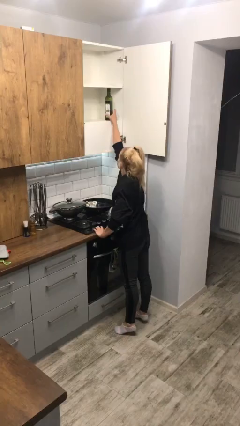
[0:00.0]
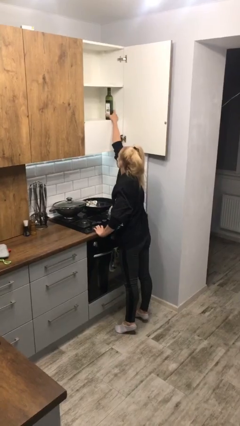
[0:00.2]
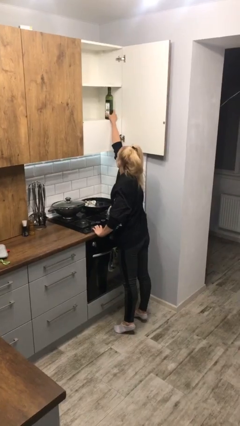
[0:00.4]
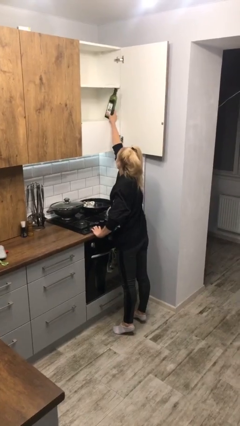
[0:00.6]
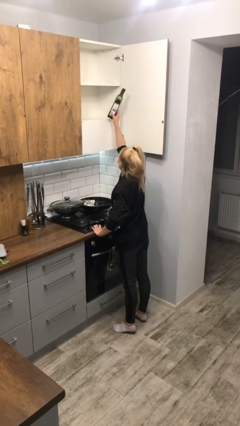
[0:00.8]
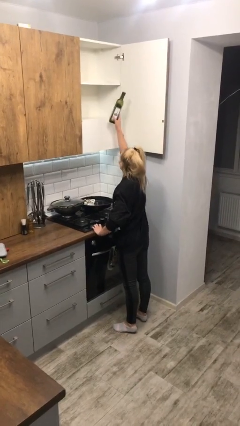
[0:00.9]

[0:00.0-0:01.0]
person picks up object from shelf

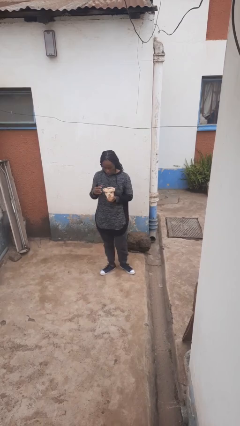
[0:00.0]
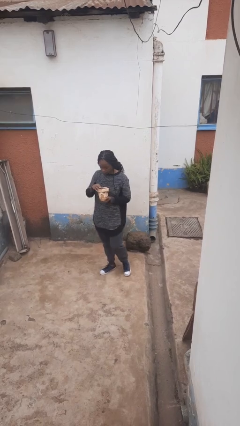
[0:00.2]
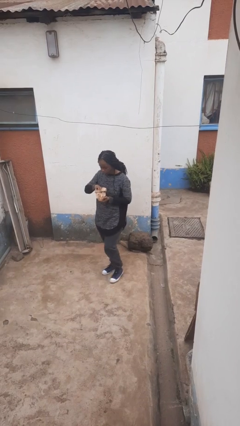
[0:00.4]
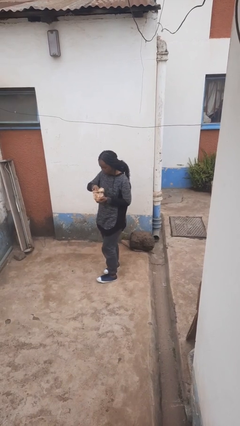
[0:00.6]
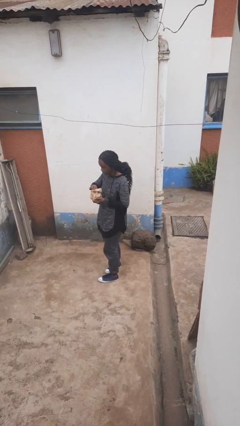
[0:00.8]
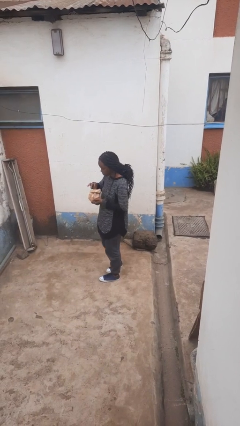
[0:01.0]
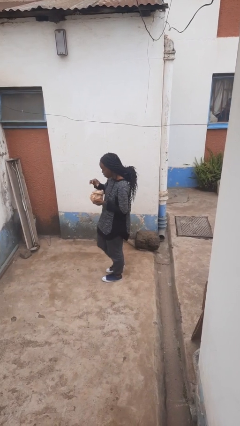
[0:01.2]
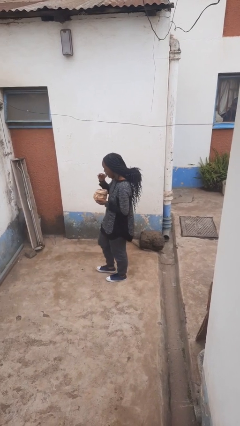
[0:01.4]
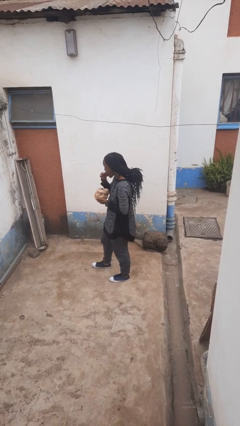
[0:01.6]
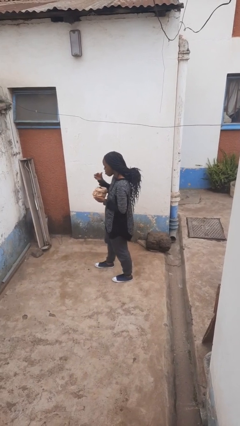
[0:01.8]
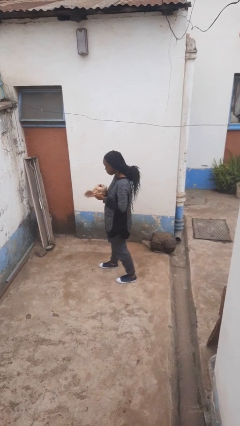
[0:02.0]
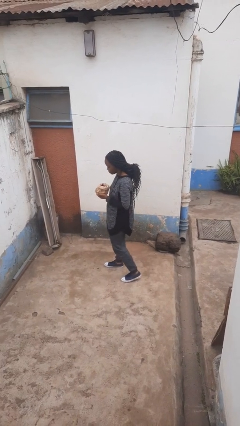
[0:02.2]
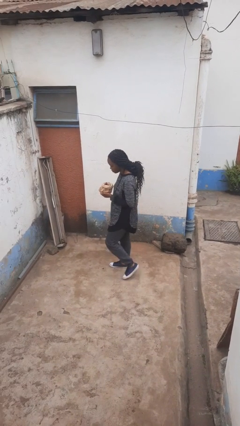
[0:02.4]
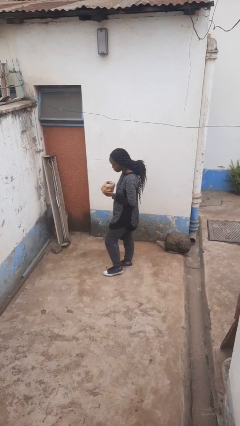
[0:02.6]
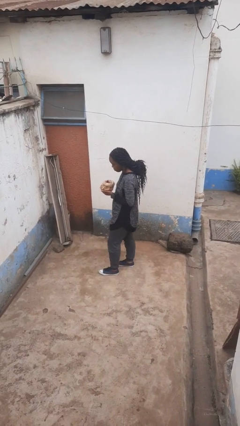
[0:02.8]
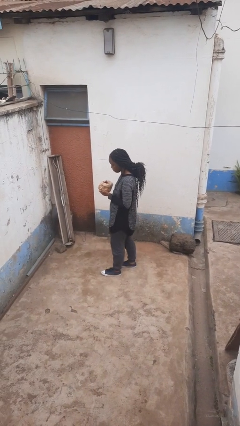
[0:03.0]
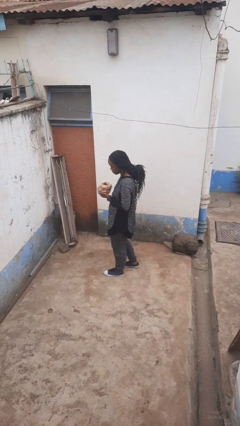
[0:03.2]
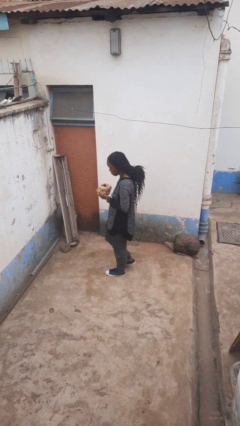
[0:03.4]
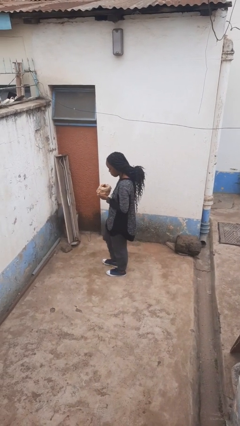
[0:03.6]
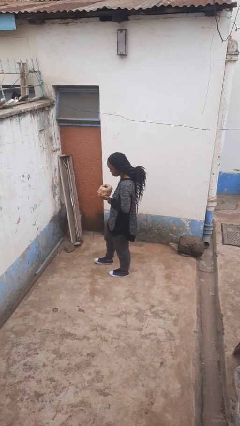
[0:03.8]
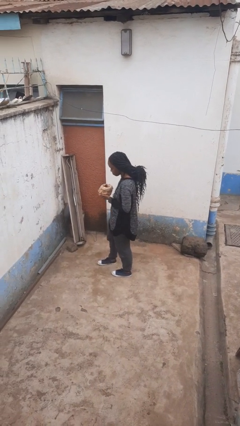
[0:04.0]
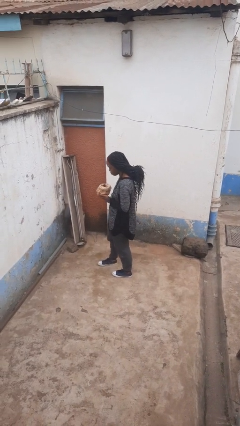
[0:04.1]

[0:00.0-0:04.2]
person eats snack from bag

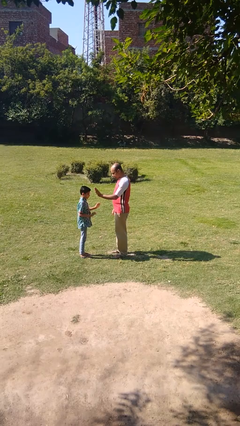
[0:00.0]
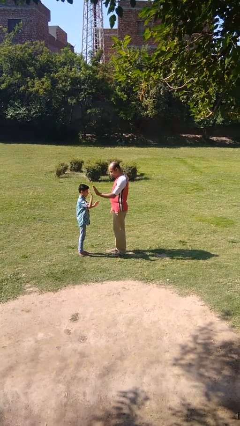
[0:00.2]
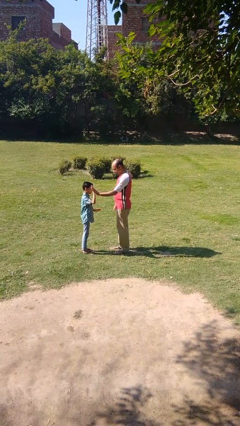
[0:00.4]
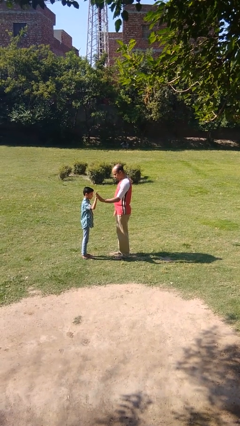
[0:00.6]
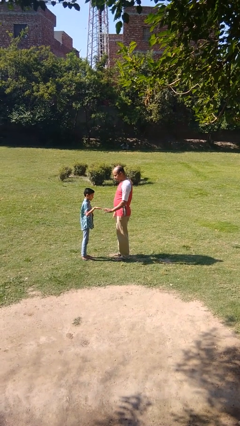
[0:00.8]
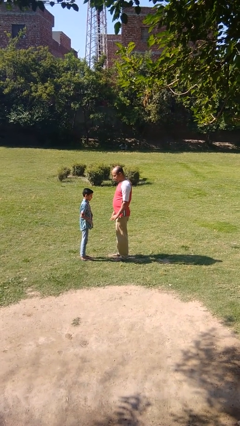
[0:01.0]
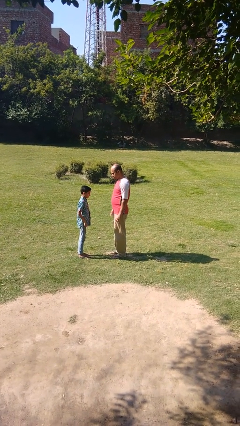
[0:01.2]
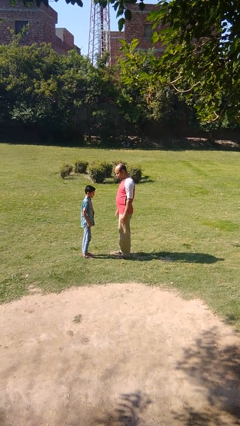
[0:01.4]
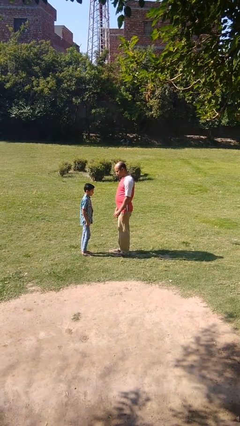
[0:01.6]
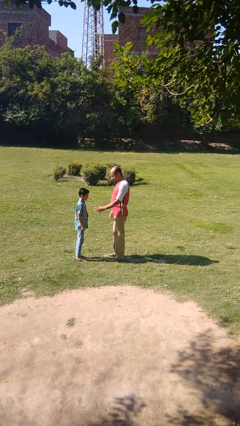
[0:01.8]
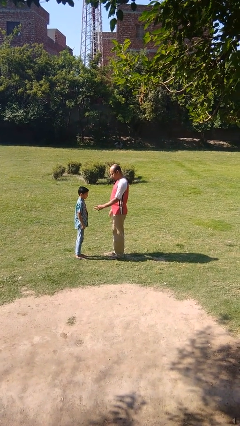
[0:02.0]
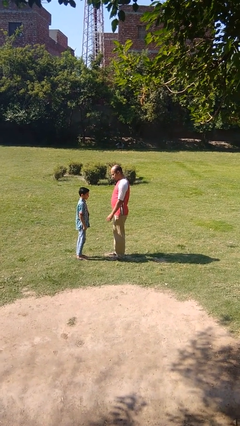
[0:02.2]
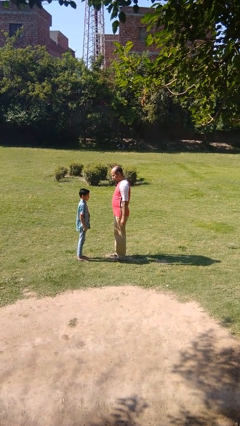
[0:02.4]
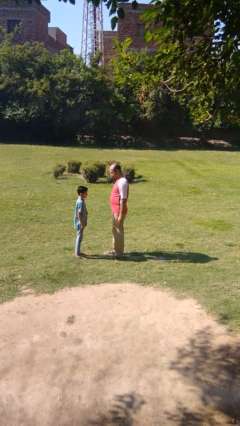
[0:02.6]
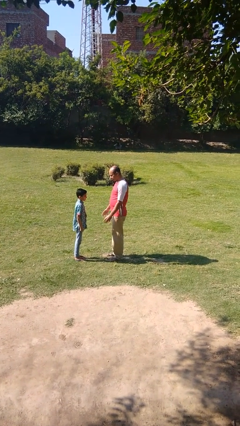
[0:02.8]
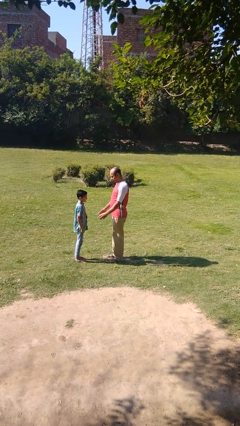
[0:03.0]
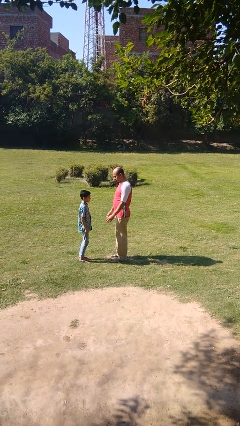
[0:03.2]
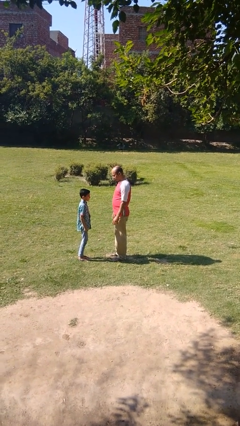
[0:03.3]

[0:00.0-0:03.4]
person highfives hand

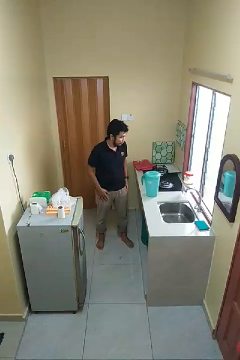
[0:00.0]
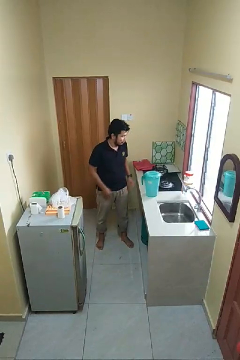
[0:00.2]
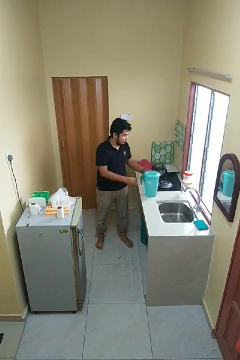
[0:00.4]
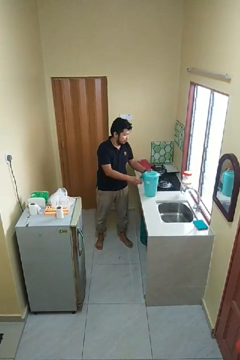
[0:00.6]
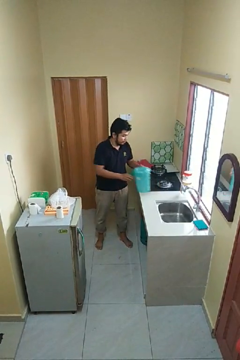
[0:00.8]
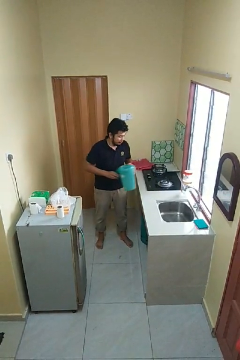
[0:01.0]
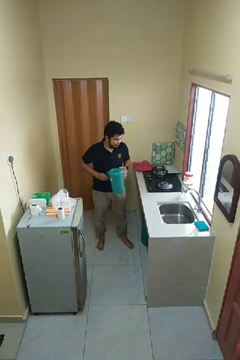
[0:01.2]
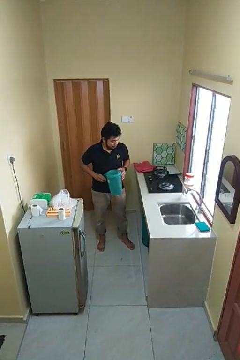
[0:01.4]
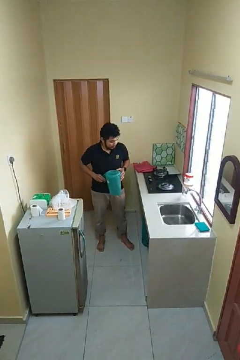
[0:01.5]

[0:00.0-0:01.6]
person picks up object from countertop

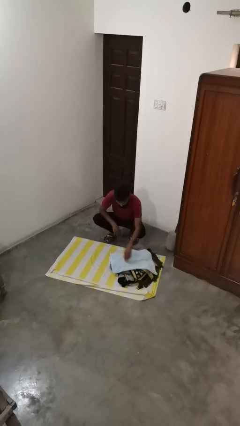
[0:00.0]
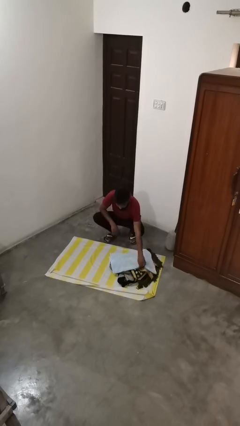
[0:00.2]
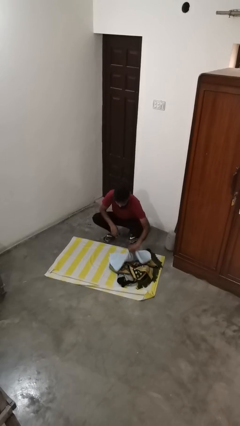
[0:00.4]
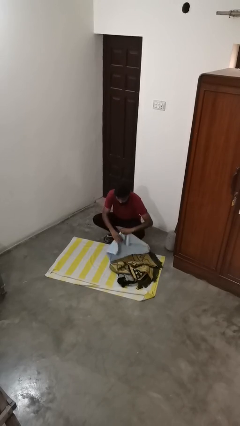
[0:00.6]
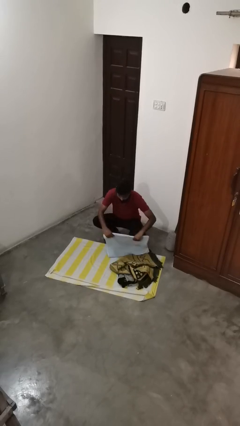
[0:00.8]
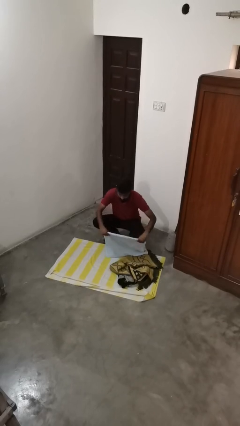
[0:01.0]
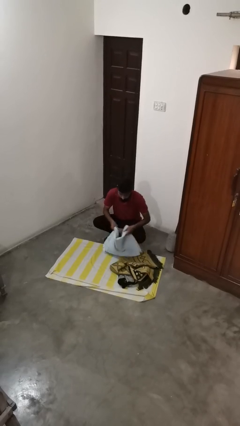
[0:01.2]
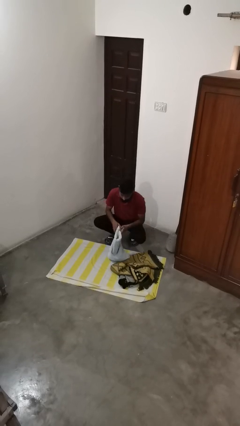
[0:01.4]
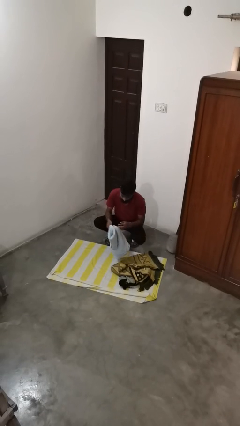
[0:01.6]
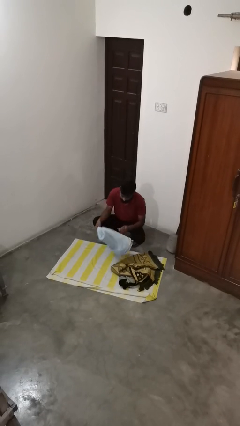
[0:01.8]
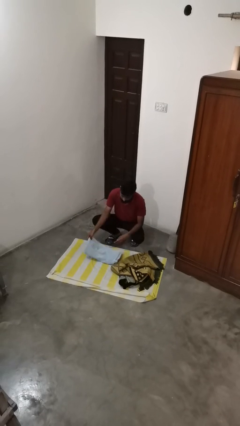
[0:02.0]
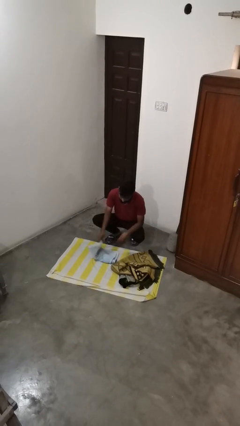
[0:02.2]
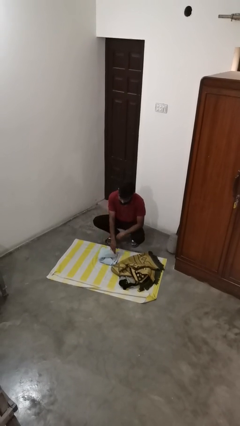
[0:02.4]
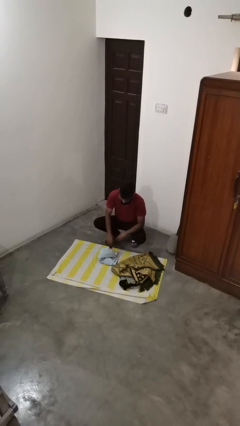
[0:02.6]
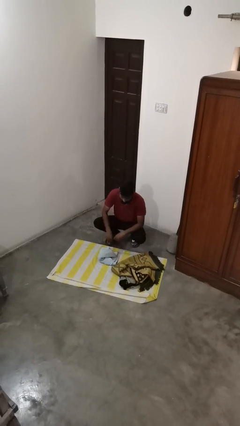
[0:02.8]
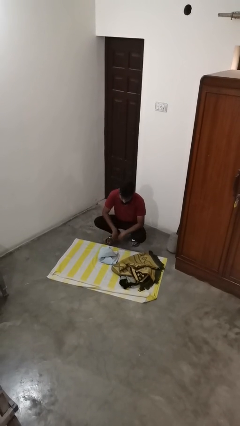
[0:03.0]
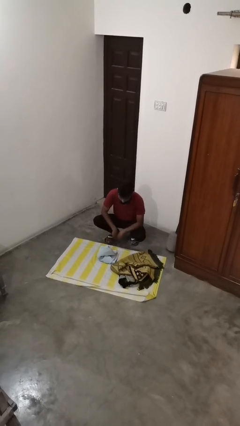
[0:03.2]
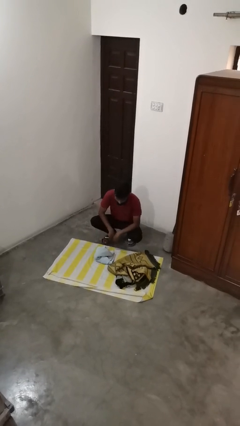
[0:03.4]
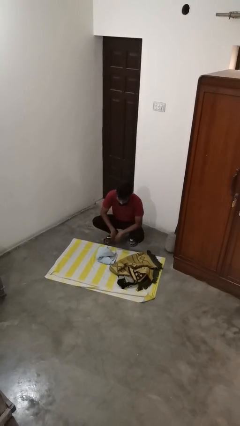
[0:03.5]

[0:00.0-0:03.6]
person folds towel

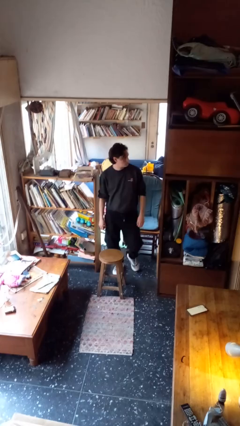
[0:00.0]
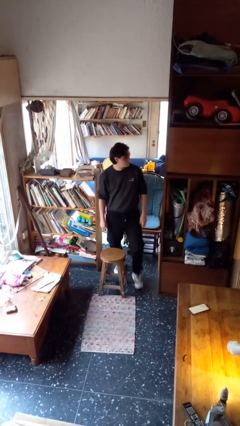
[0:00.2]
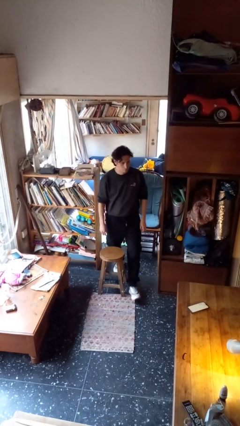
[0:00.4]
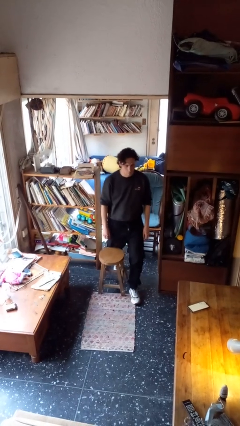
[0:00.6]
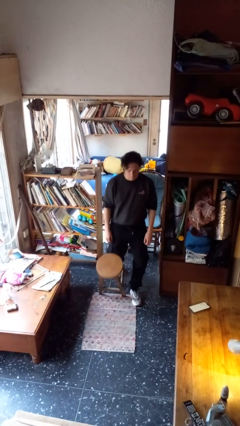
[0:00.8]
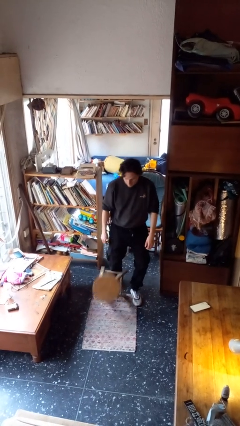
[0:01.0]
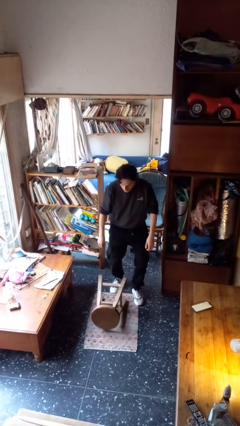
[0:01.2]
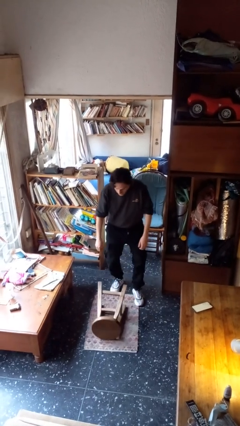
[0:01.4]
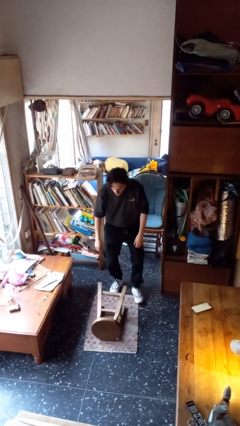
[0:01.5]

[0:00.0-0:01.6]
person knocks over furniture

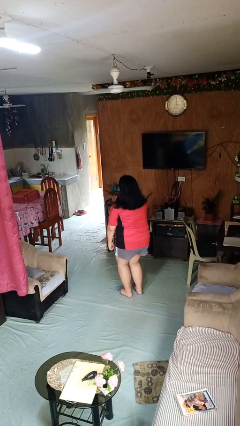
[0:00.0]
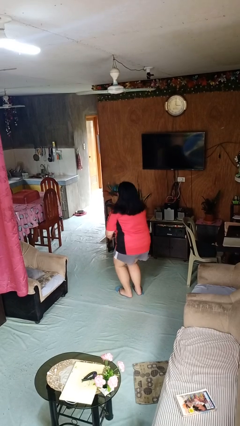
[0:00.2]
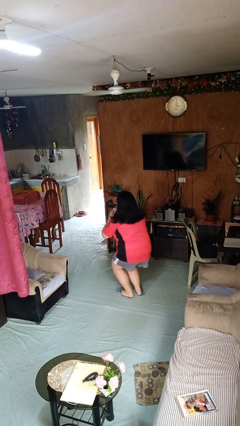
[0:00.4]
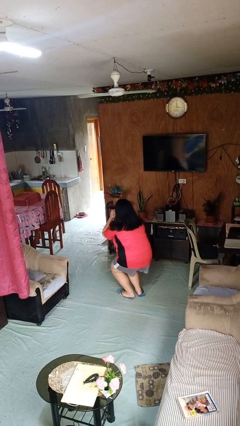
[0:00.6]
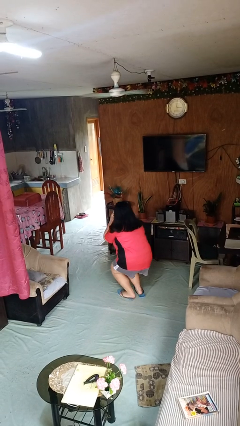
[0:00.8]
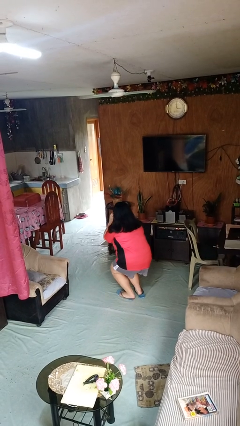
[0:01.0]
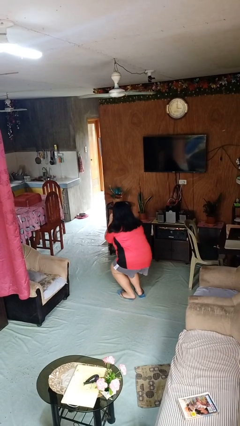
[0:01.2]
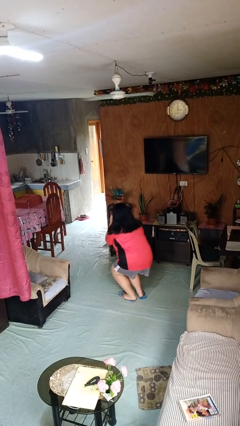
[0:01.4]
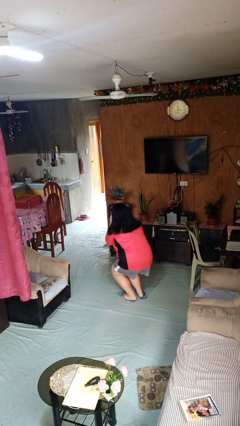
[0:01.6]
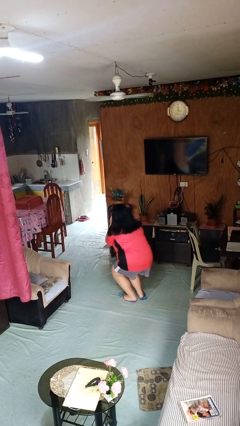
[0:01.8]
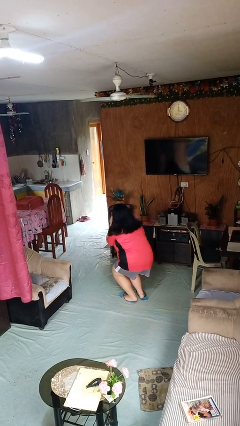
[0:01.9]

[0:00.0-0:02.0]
person squats
